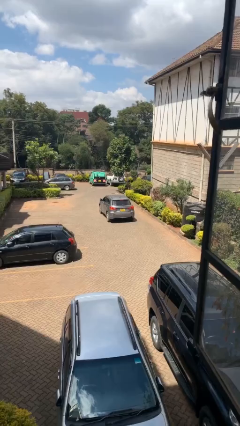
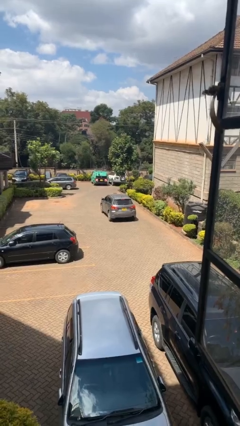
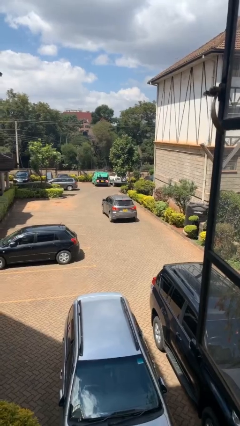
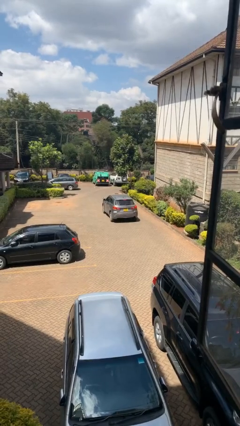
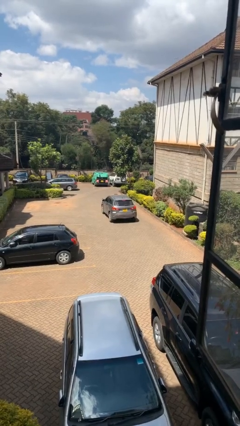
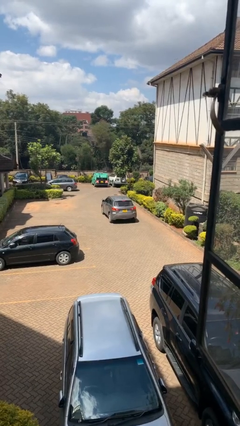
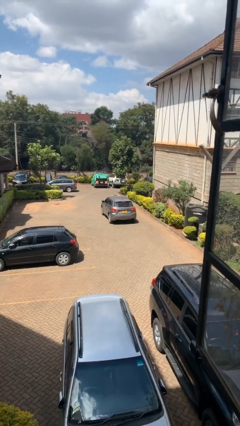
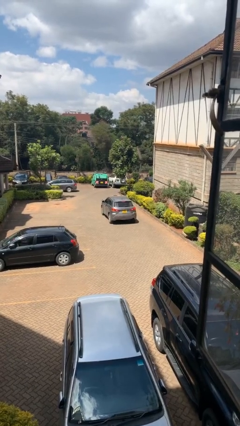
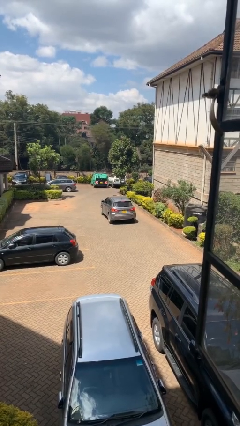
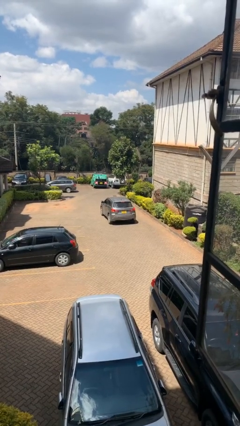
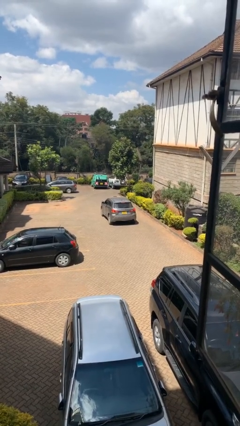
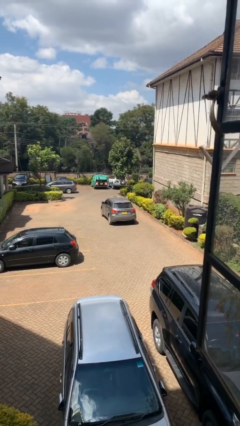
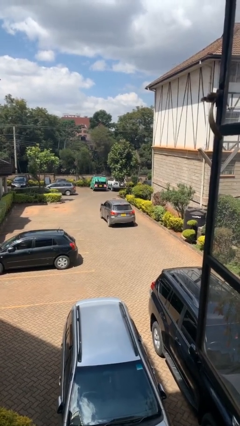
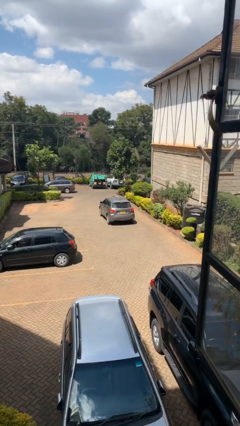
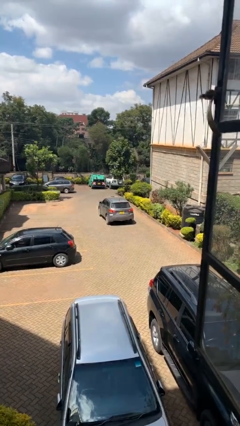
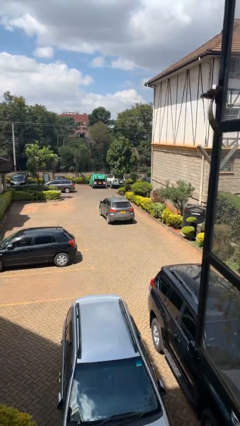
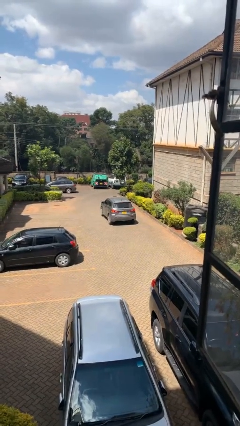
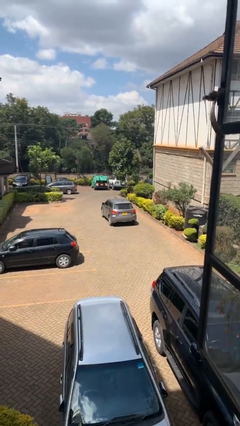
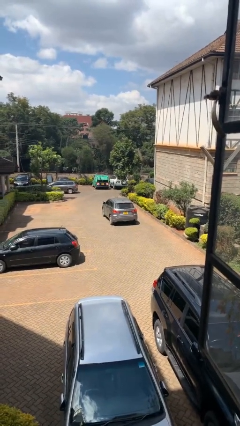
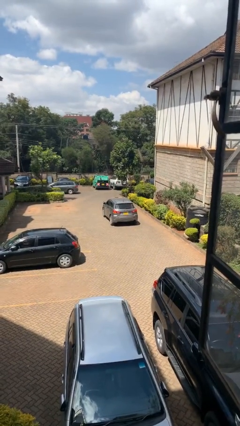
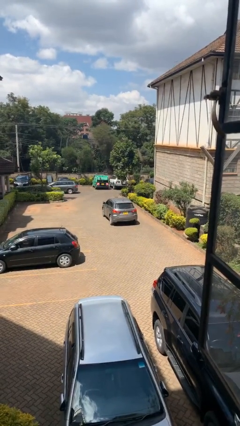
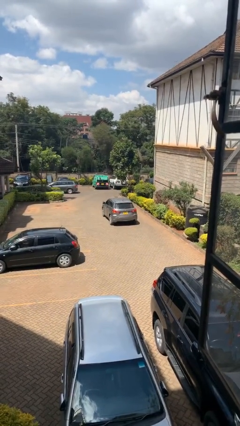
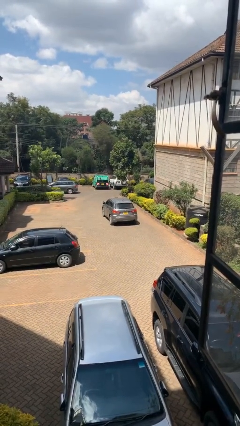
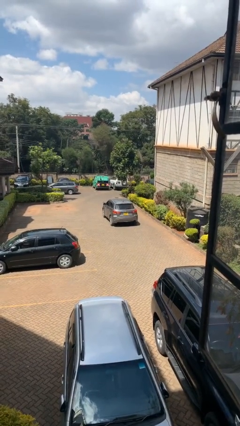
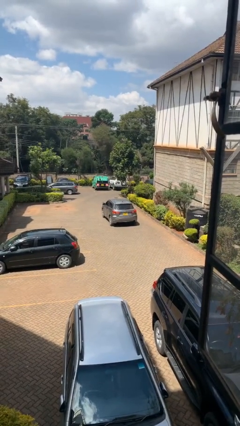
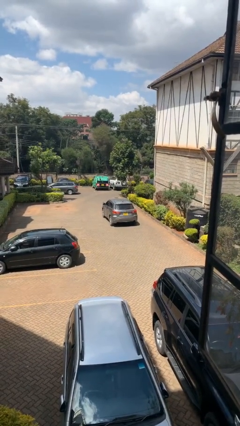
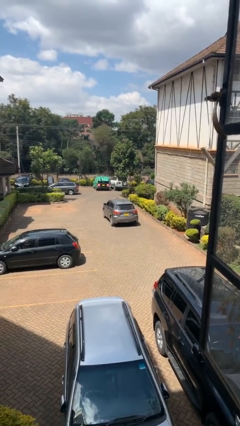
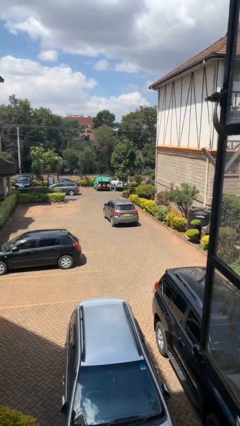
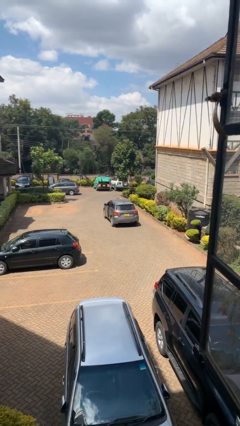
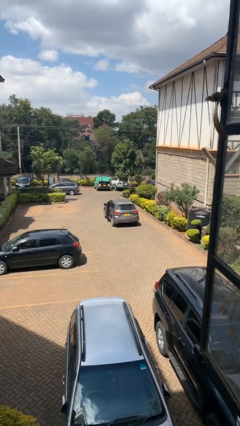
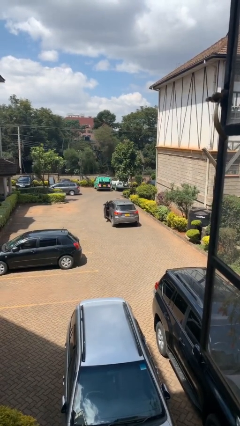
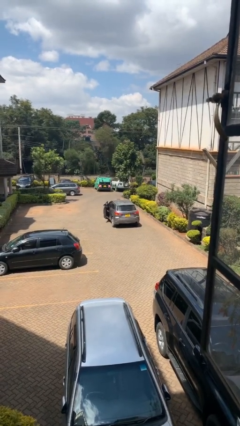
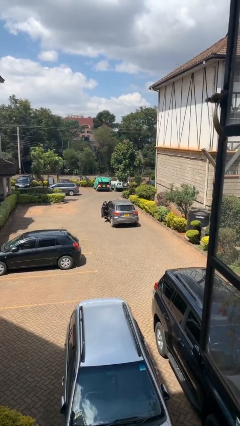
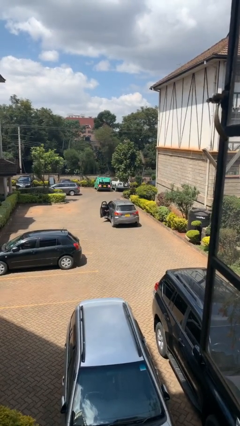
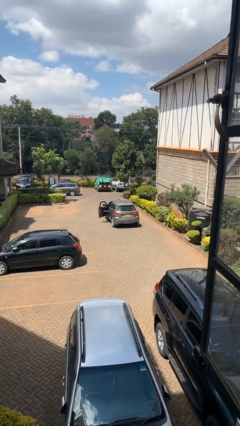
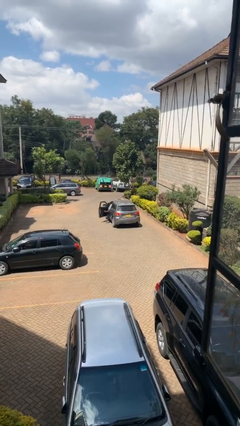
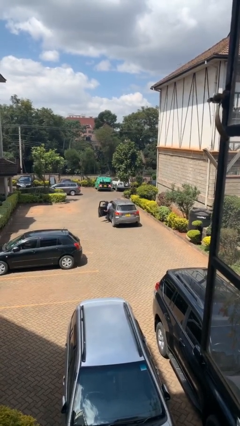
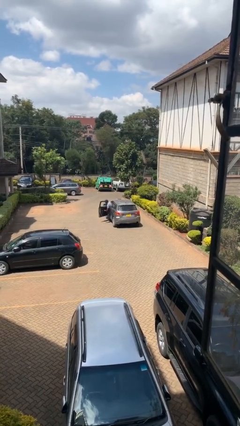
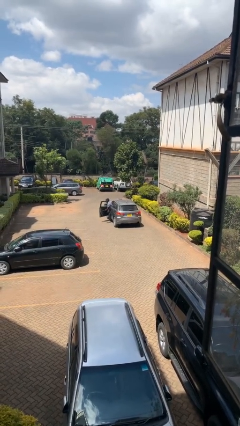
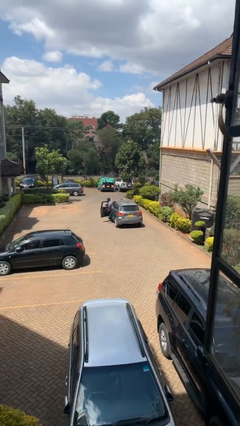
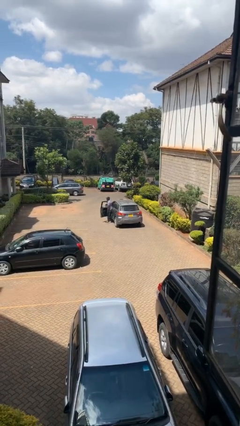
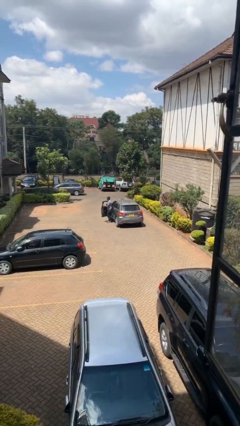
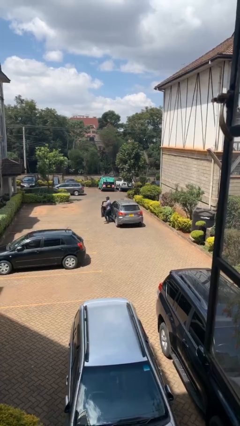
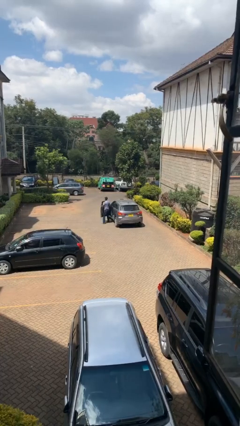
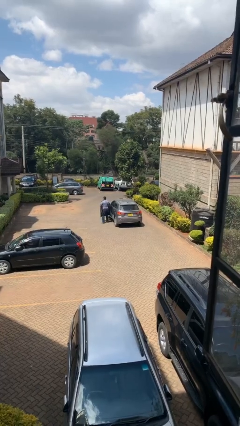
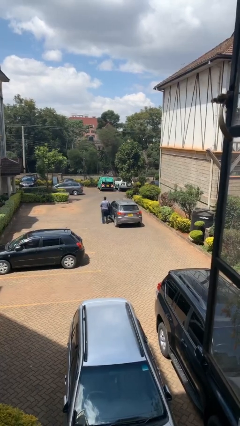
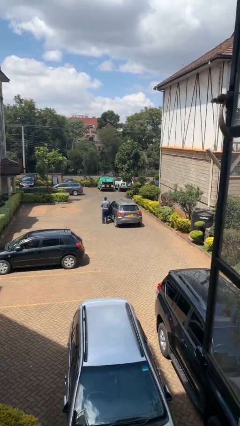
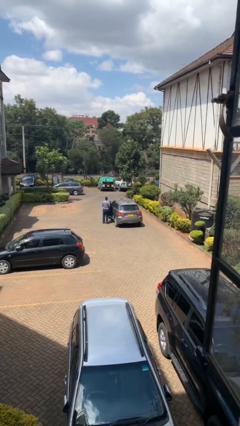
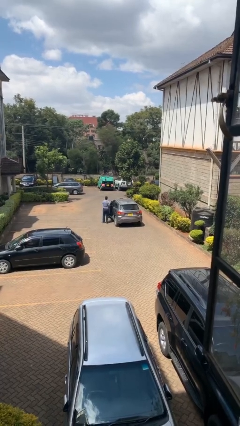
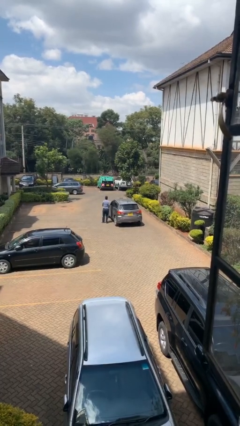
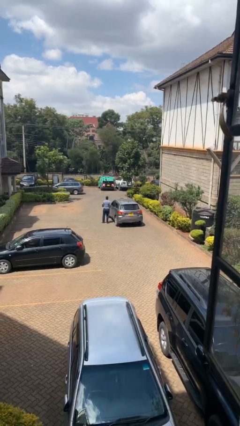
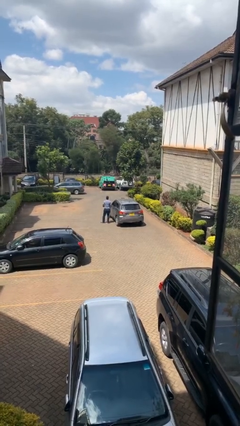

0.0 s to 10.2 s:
car drops off person

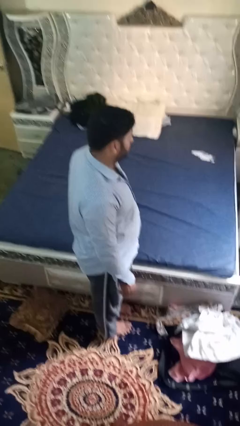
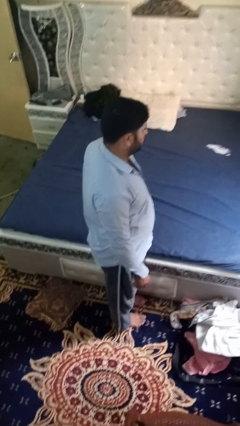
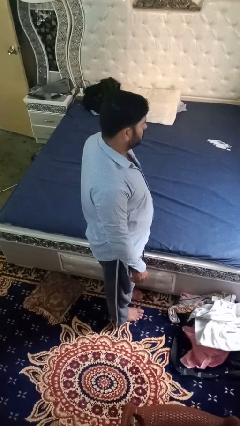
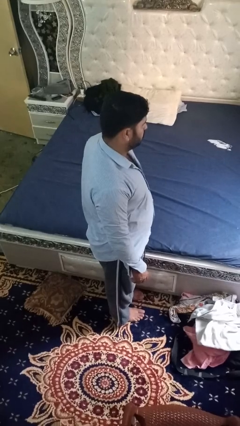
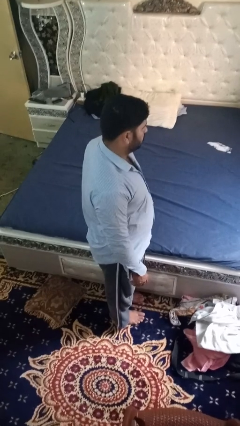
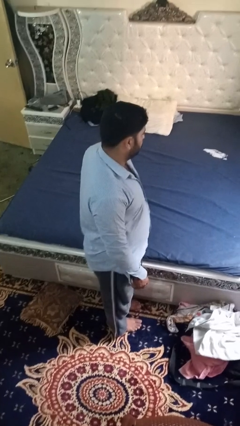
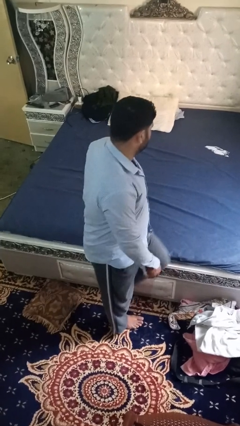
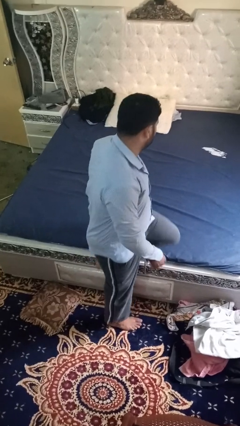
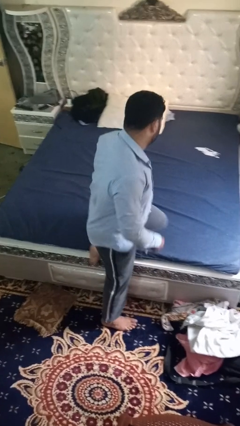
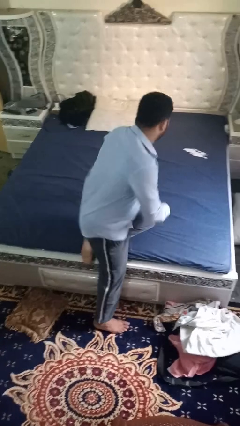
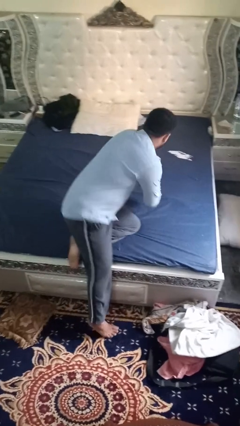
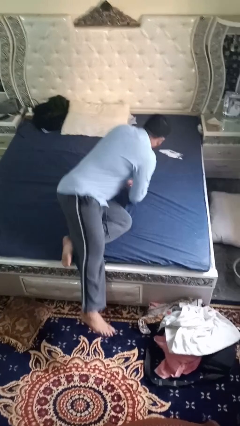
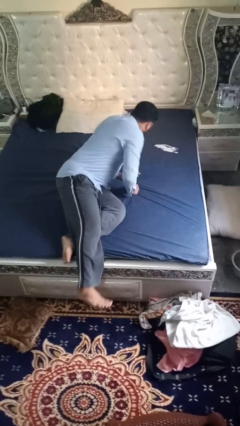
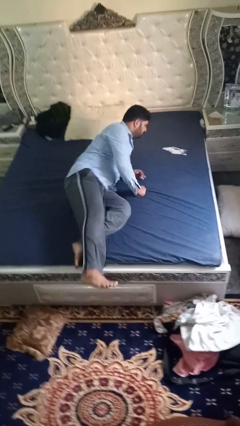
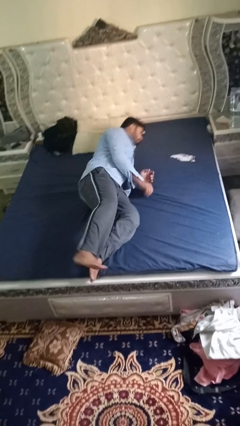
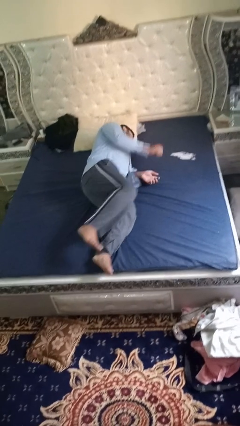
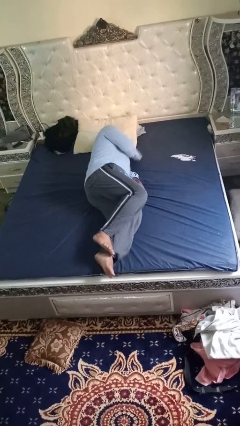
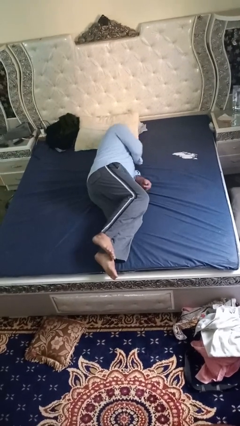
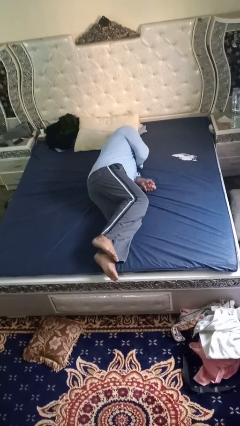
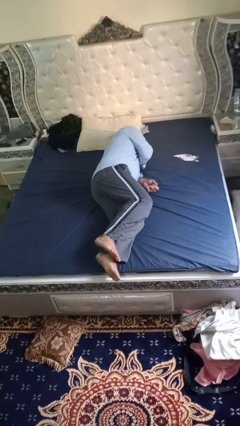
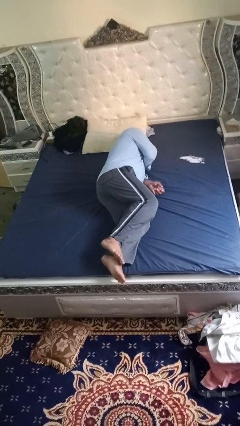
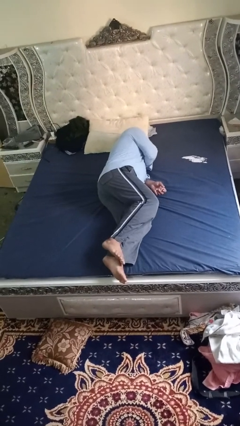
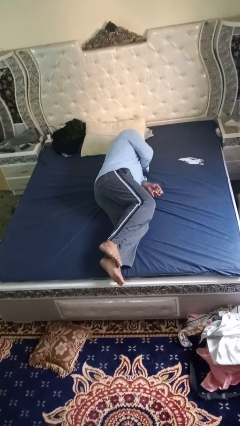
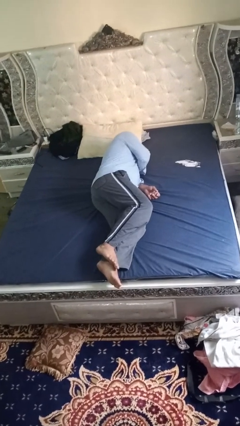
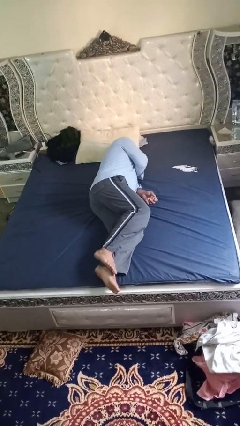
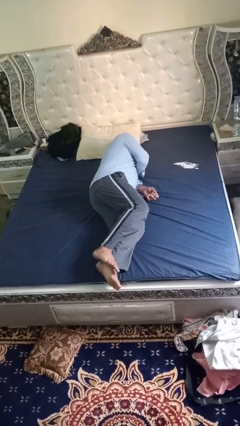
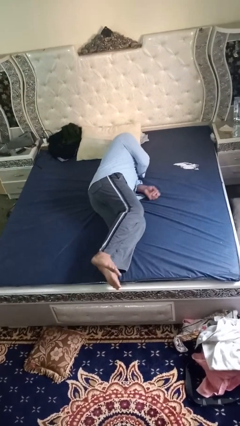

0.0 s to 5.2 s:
person lies down on bed

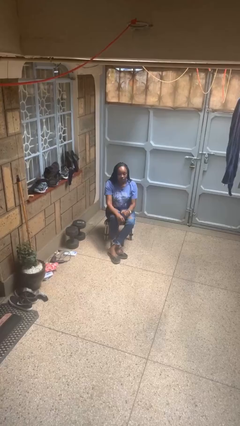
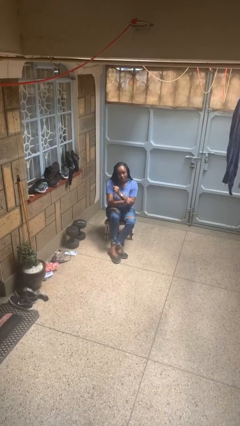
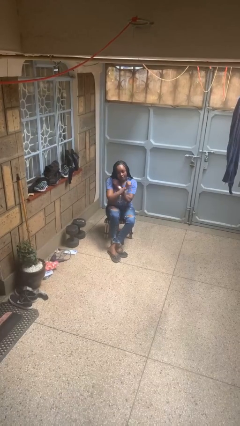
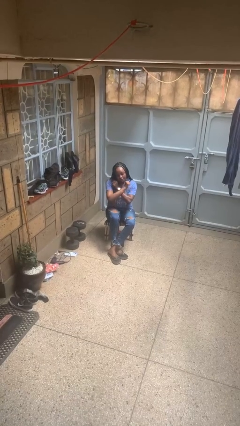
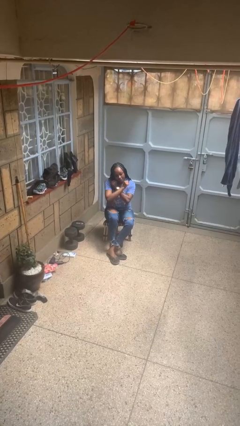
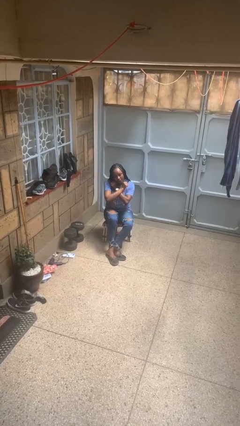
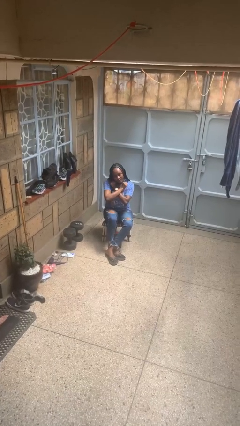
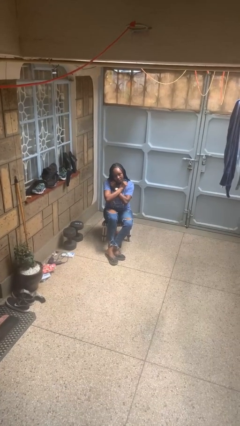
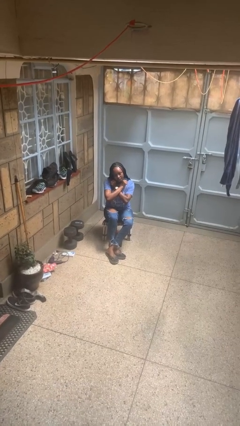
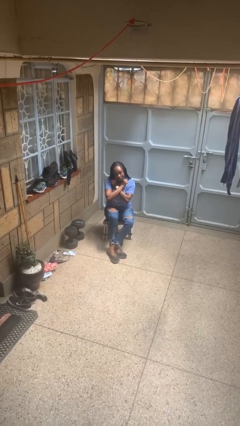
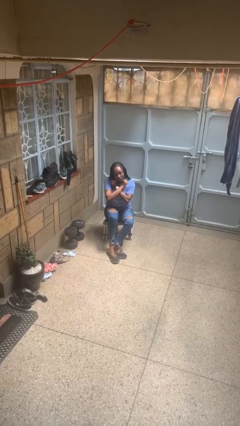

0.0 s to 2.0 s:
person gestures arms x

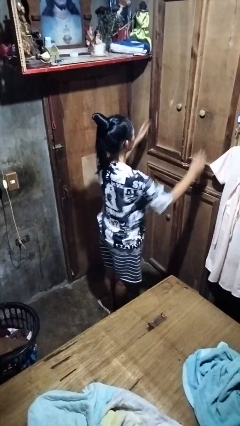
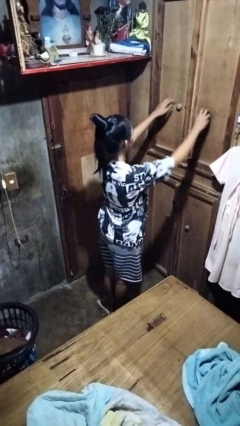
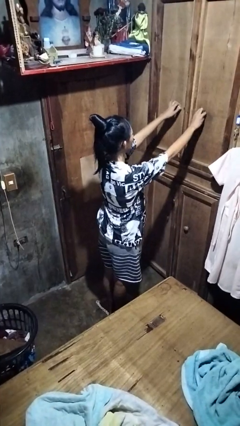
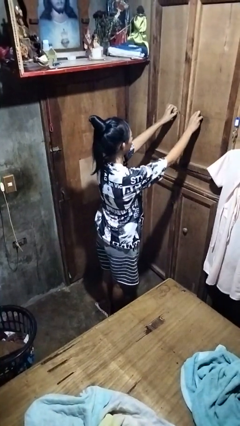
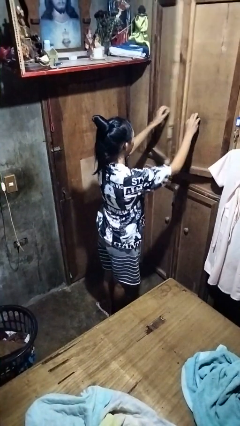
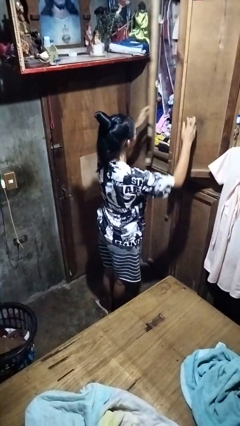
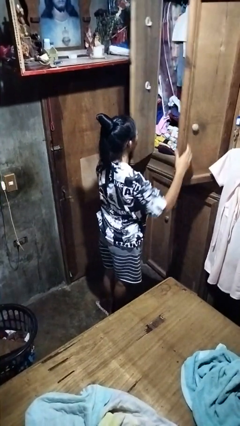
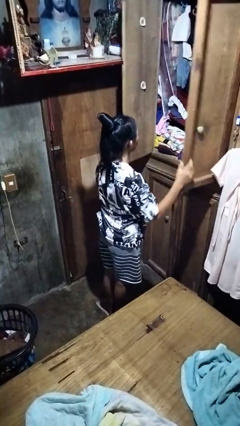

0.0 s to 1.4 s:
person opens closet door
